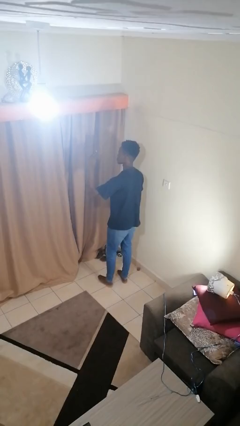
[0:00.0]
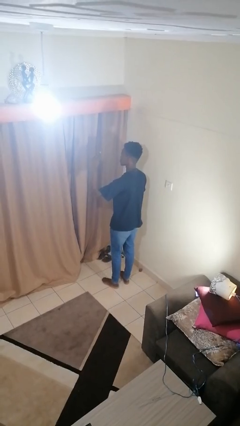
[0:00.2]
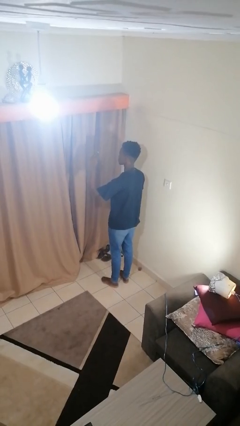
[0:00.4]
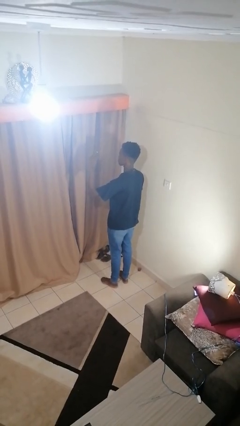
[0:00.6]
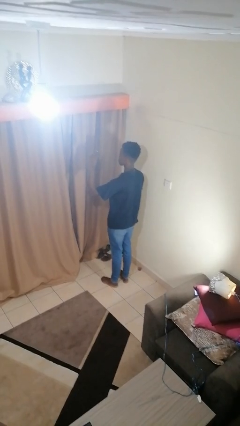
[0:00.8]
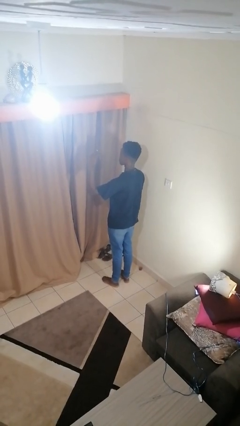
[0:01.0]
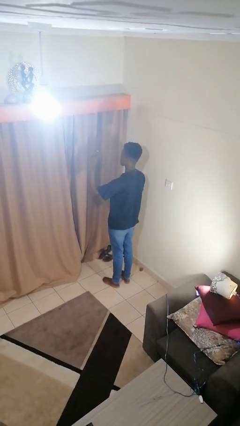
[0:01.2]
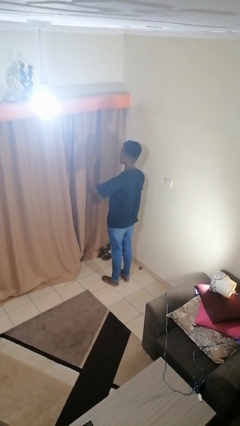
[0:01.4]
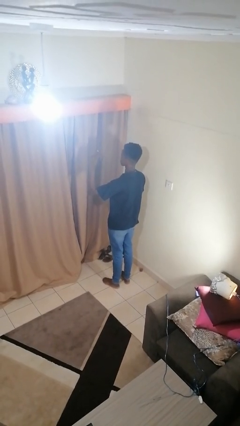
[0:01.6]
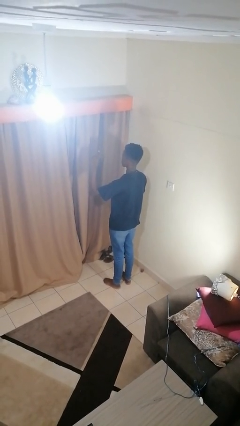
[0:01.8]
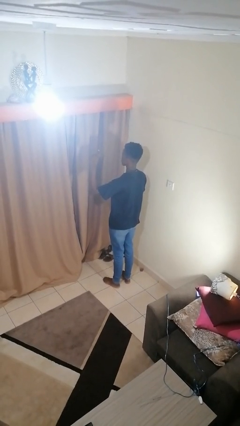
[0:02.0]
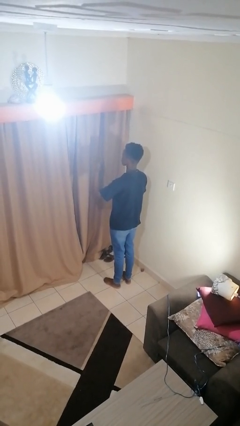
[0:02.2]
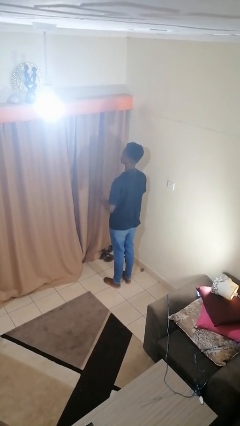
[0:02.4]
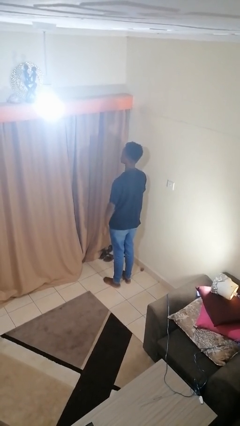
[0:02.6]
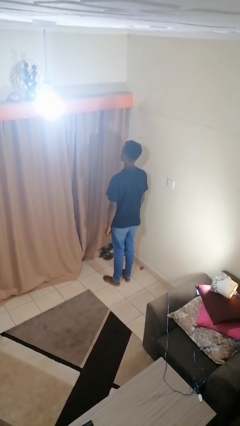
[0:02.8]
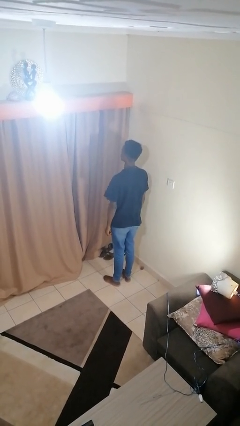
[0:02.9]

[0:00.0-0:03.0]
person gestures number one

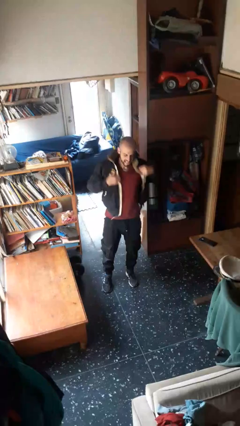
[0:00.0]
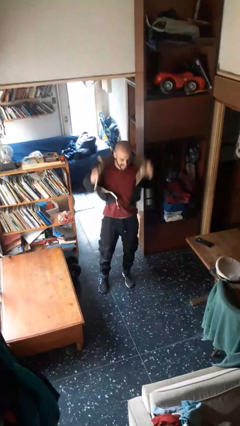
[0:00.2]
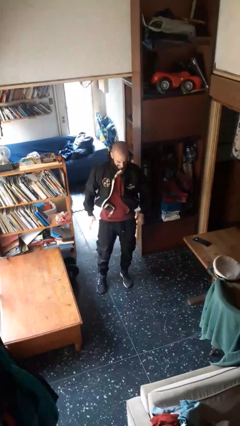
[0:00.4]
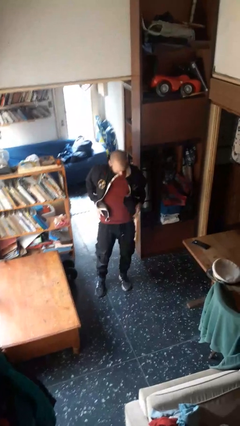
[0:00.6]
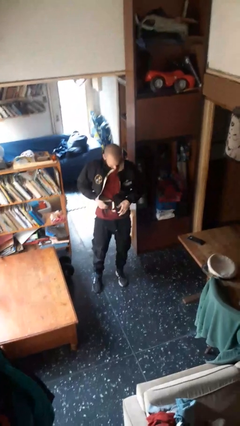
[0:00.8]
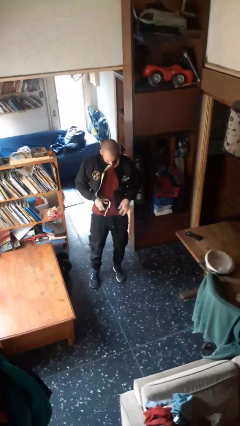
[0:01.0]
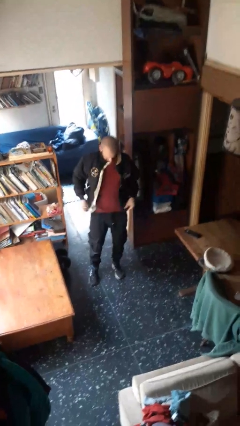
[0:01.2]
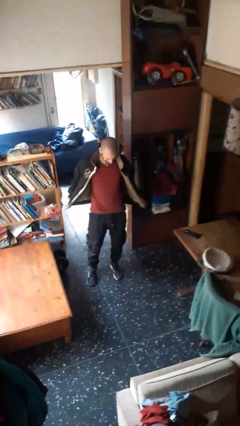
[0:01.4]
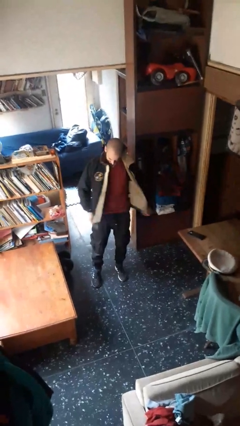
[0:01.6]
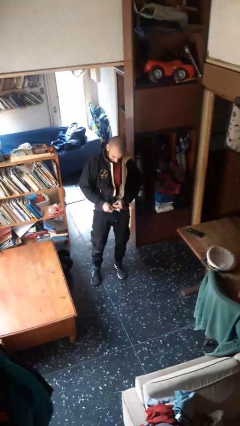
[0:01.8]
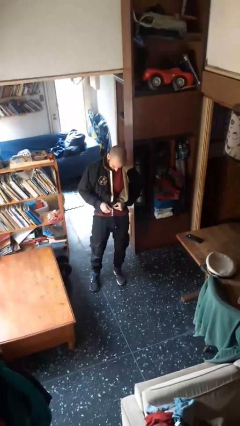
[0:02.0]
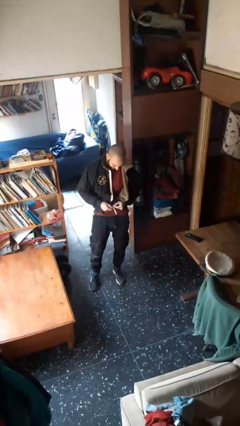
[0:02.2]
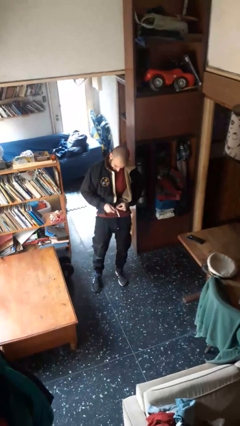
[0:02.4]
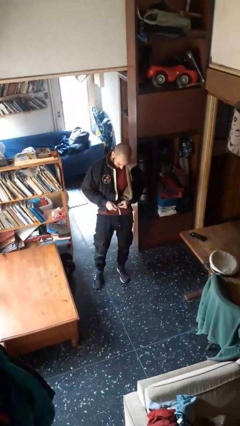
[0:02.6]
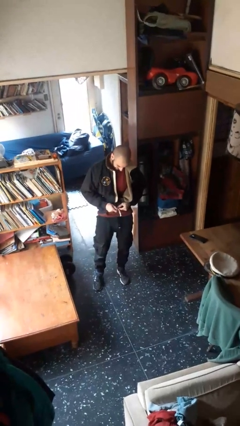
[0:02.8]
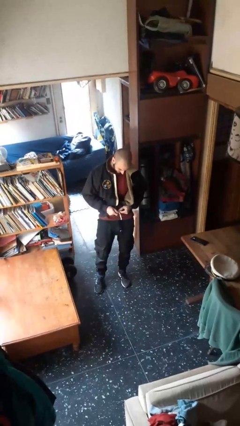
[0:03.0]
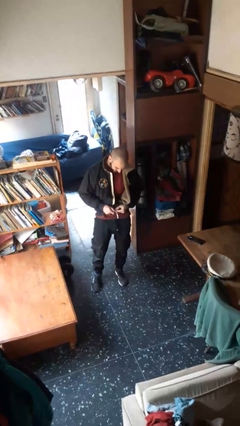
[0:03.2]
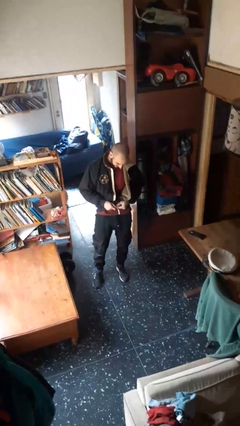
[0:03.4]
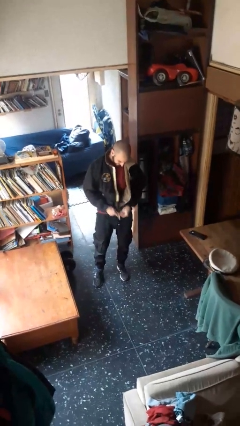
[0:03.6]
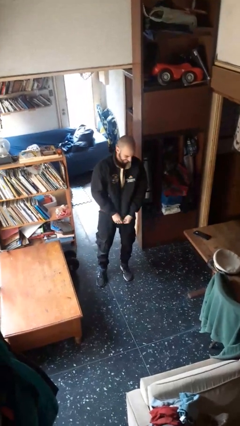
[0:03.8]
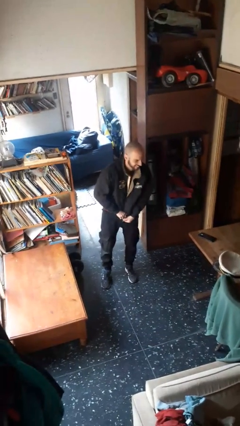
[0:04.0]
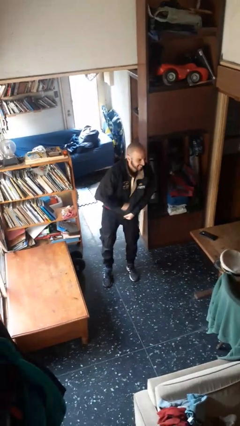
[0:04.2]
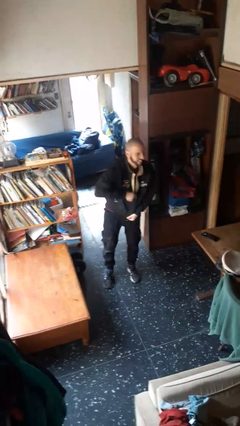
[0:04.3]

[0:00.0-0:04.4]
person zips up jacket

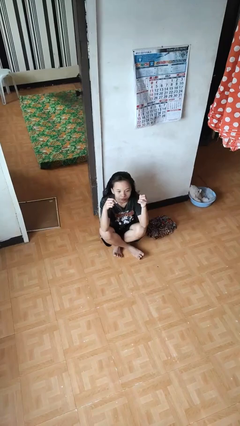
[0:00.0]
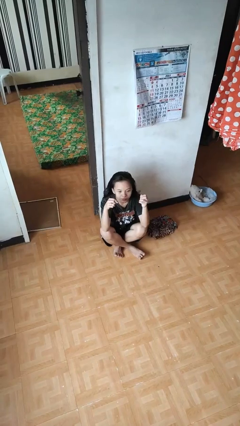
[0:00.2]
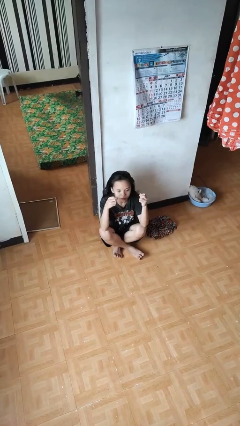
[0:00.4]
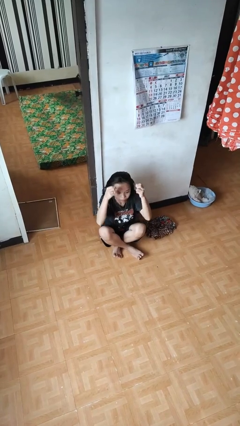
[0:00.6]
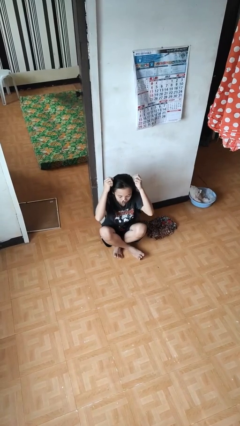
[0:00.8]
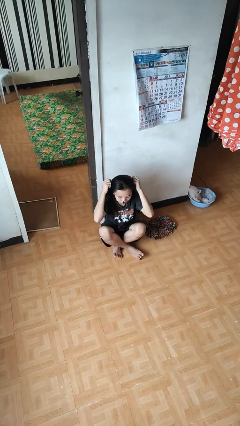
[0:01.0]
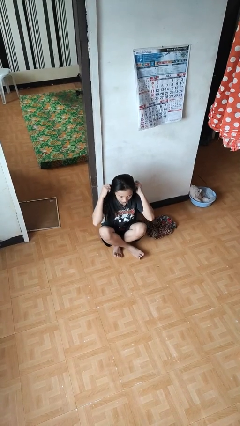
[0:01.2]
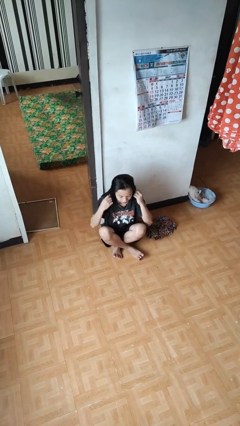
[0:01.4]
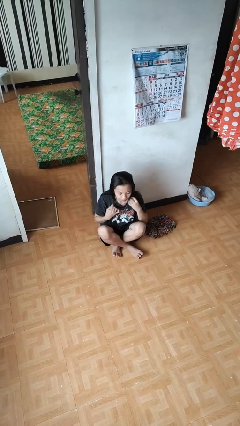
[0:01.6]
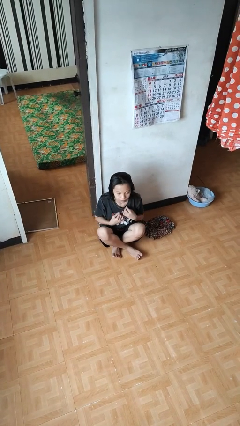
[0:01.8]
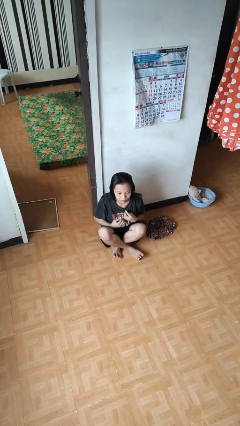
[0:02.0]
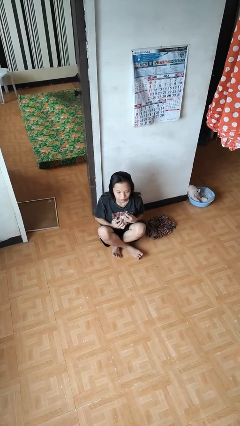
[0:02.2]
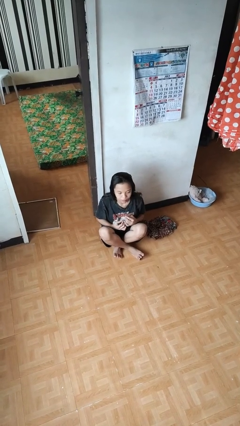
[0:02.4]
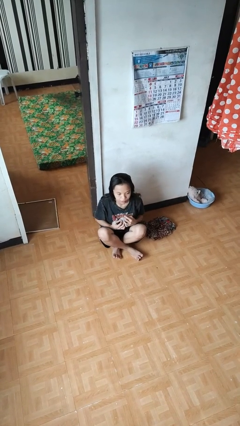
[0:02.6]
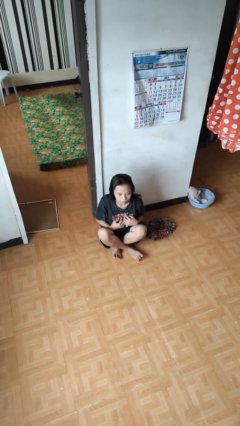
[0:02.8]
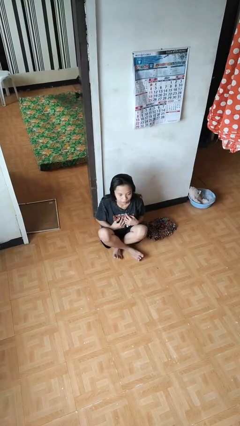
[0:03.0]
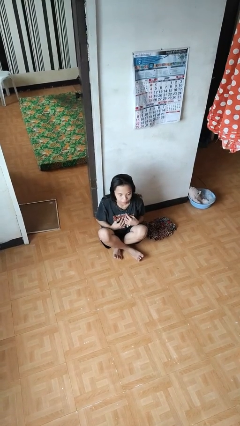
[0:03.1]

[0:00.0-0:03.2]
person puts on necklace

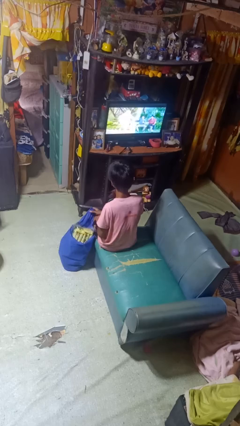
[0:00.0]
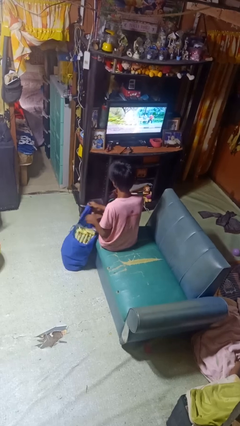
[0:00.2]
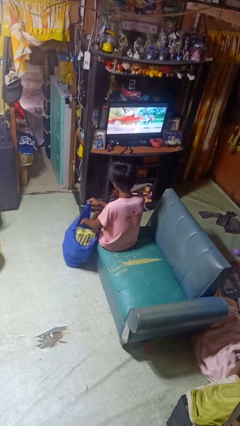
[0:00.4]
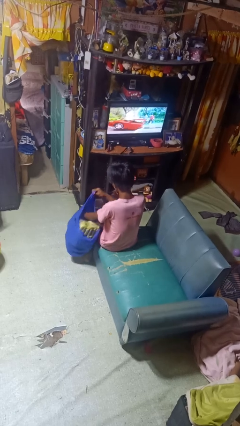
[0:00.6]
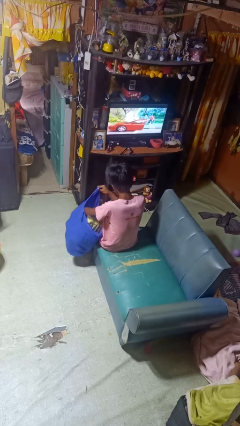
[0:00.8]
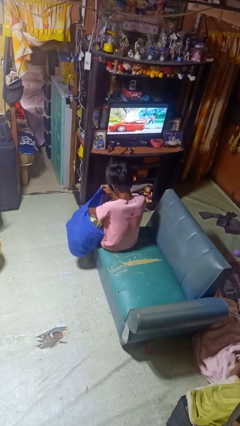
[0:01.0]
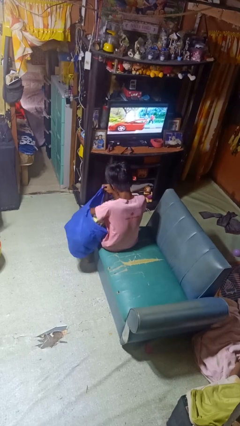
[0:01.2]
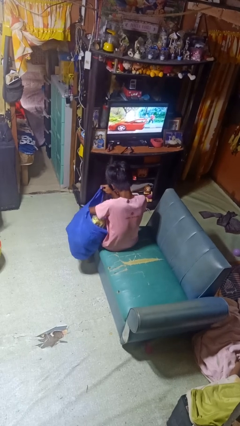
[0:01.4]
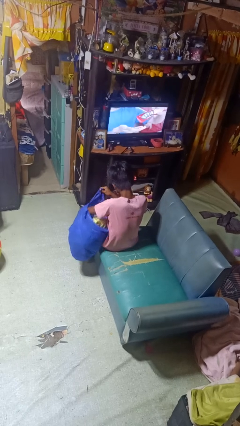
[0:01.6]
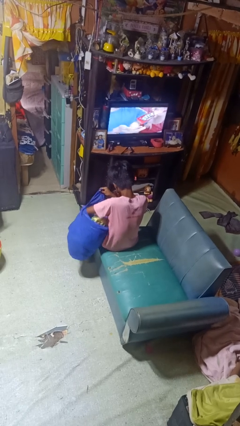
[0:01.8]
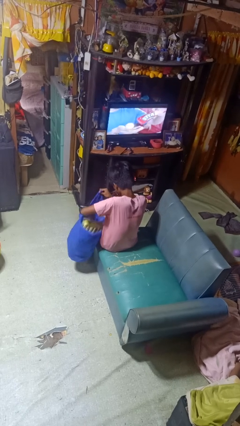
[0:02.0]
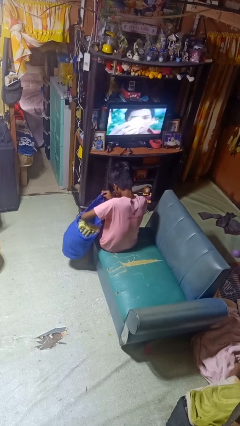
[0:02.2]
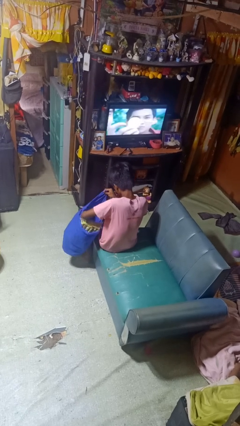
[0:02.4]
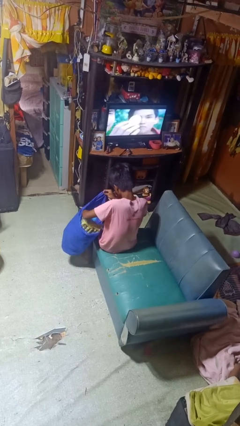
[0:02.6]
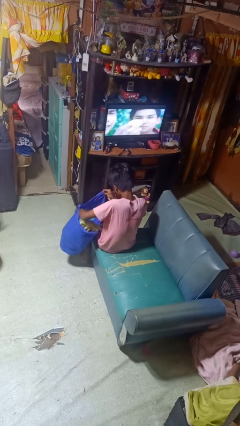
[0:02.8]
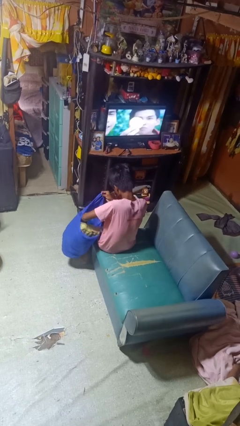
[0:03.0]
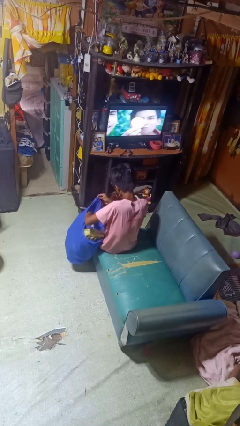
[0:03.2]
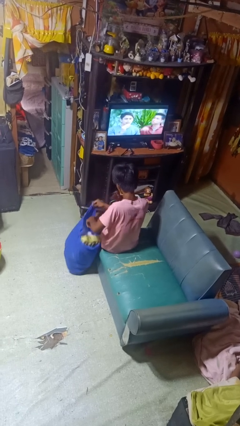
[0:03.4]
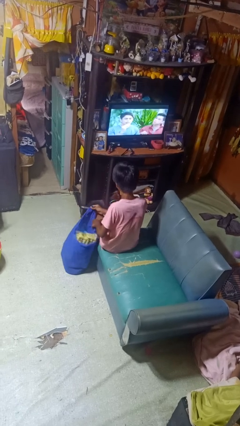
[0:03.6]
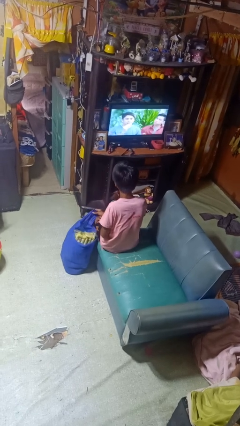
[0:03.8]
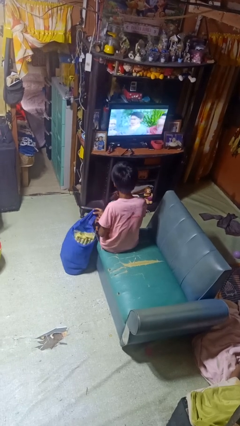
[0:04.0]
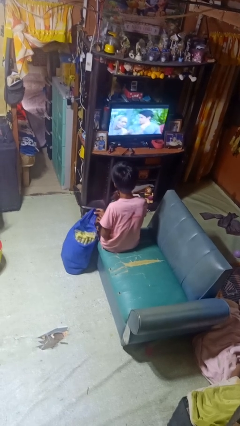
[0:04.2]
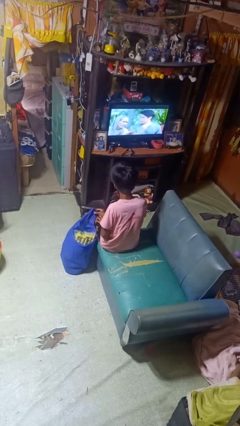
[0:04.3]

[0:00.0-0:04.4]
person searches in bag

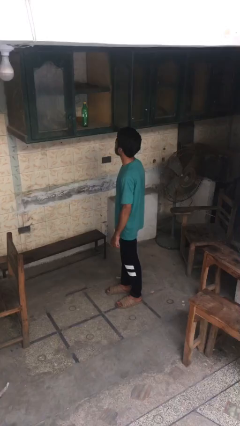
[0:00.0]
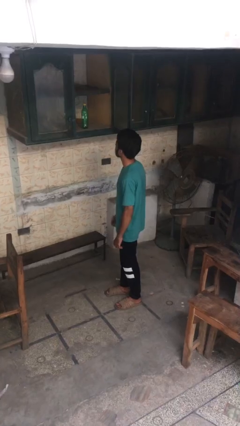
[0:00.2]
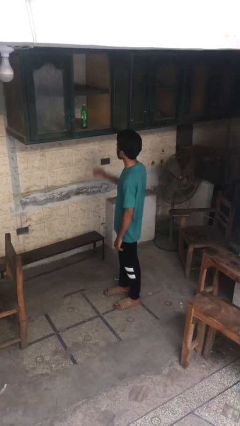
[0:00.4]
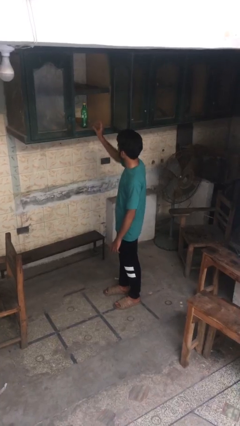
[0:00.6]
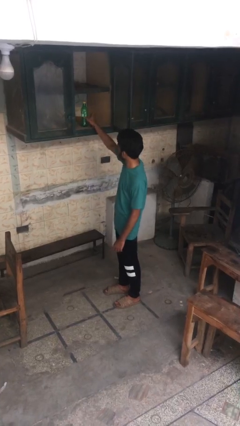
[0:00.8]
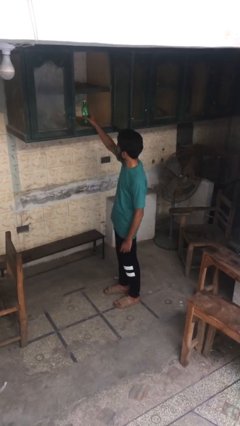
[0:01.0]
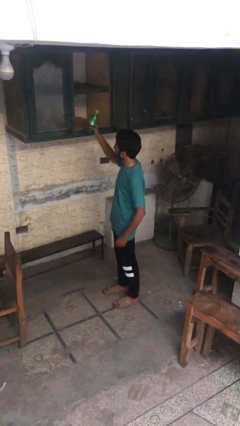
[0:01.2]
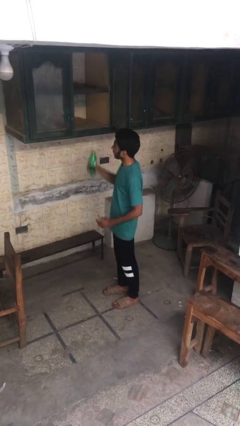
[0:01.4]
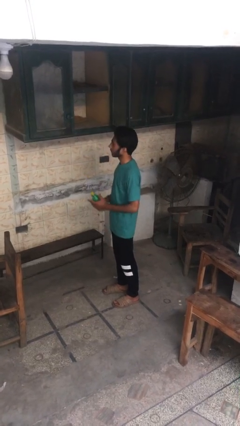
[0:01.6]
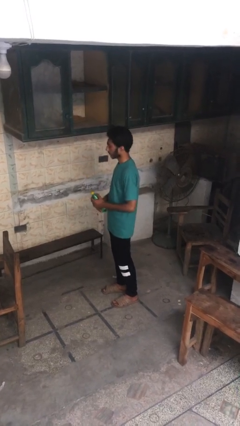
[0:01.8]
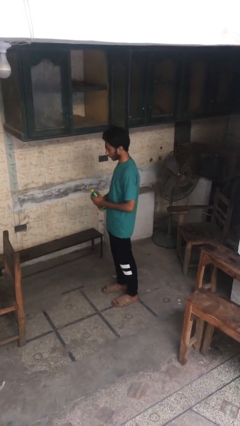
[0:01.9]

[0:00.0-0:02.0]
person takes object from cabinet

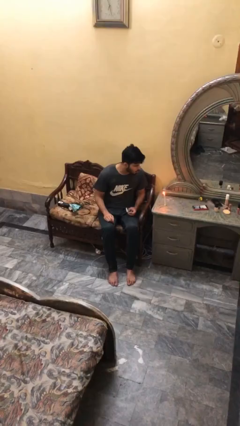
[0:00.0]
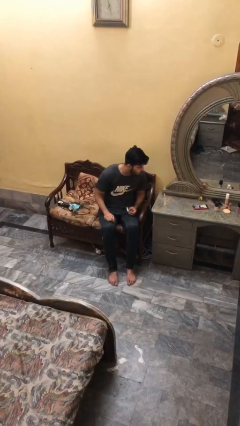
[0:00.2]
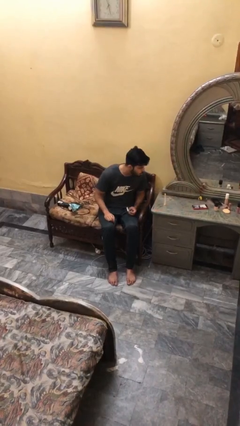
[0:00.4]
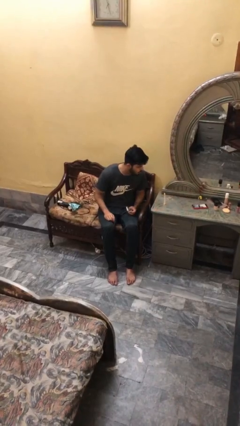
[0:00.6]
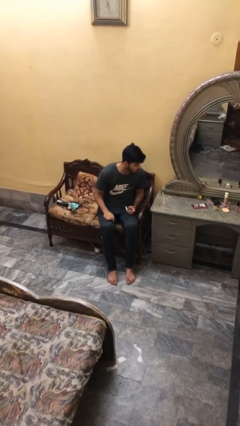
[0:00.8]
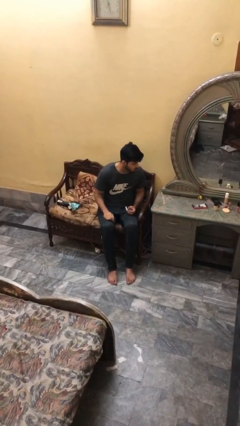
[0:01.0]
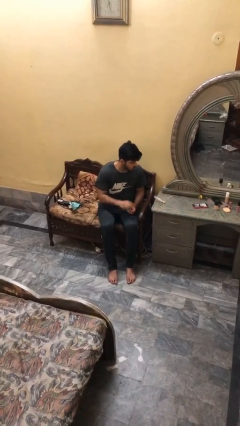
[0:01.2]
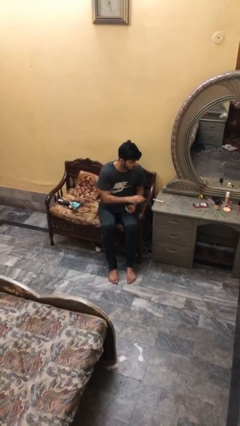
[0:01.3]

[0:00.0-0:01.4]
person extinguishes candle
